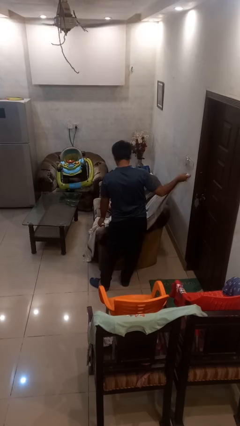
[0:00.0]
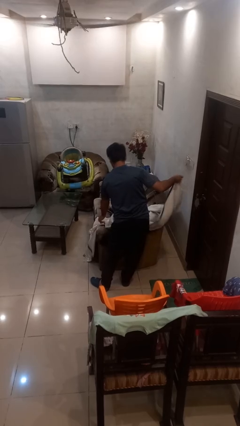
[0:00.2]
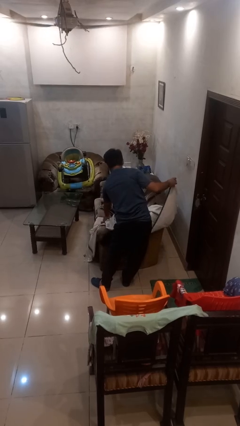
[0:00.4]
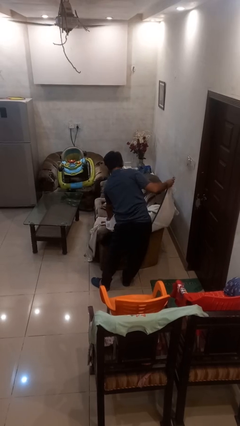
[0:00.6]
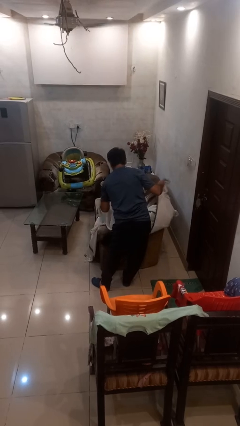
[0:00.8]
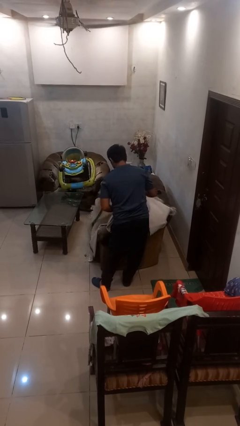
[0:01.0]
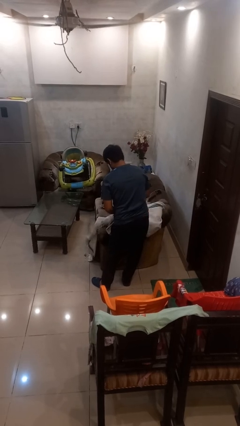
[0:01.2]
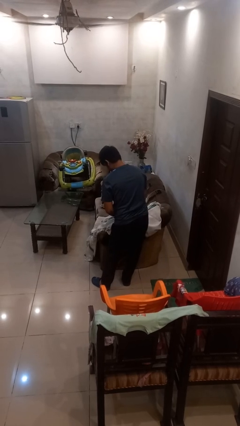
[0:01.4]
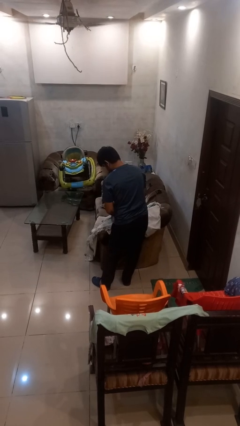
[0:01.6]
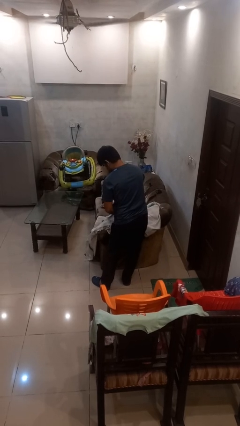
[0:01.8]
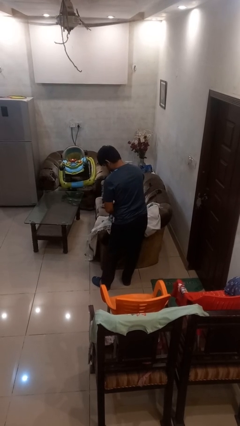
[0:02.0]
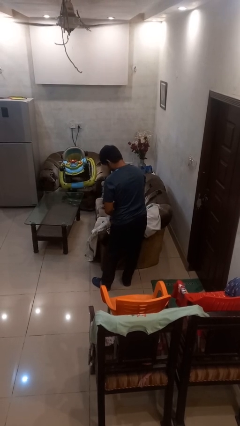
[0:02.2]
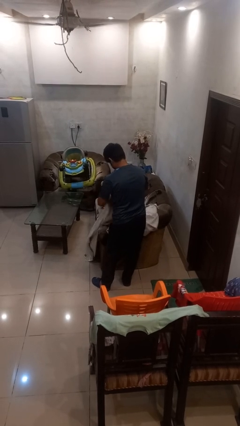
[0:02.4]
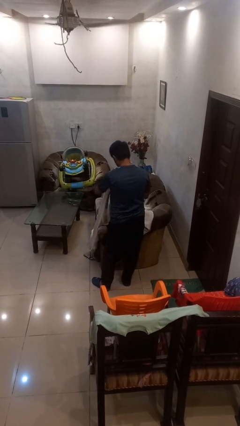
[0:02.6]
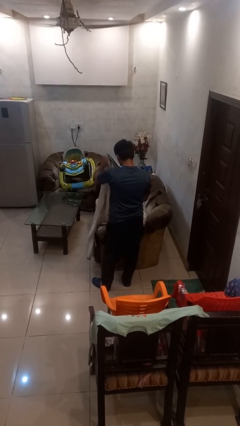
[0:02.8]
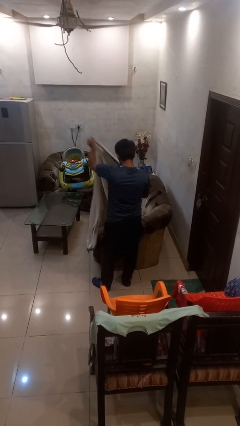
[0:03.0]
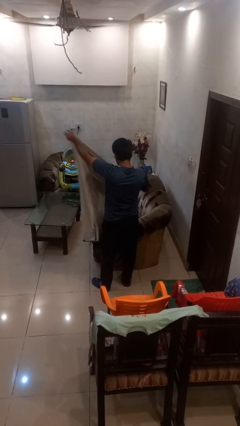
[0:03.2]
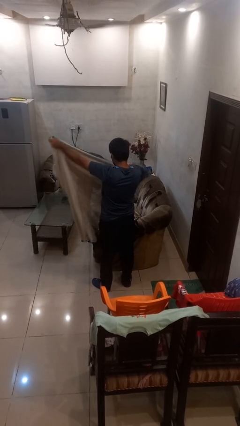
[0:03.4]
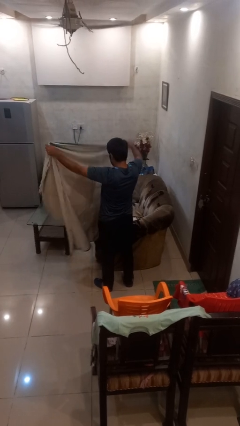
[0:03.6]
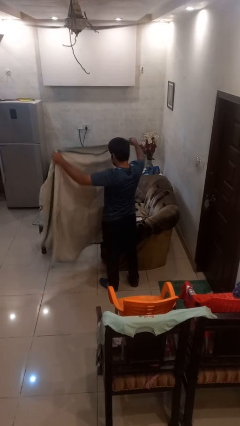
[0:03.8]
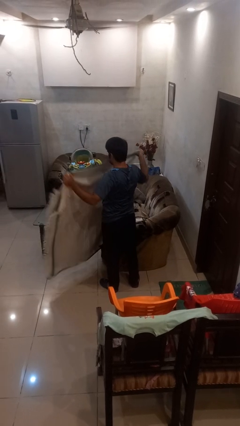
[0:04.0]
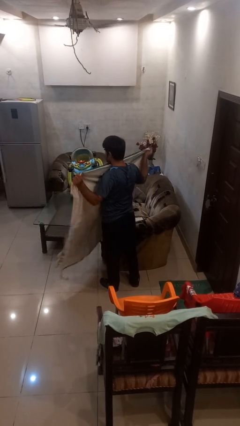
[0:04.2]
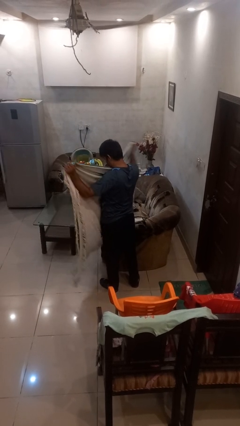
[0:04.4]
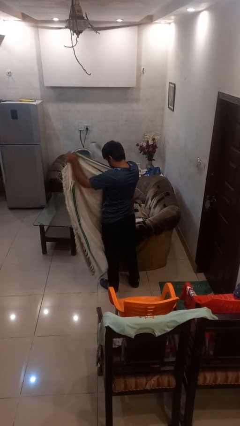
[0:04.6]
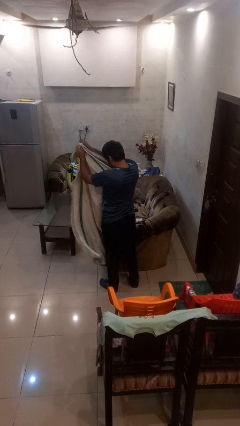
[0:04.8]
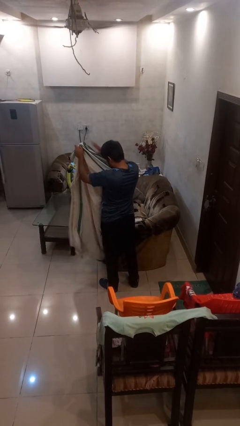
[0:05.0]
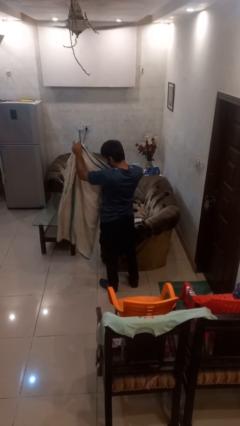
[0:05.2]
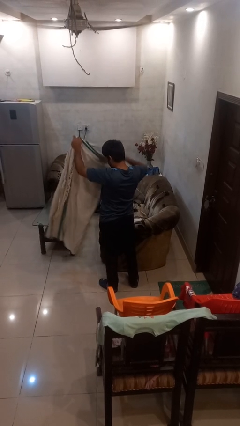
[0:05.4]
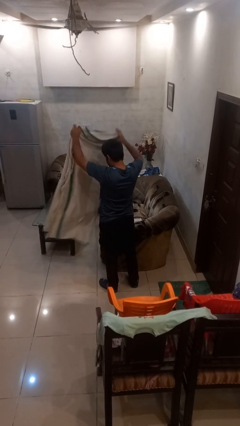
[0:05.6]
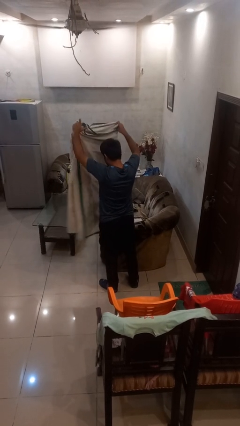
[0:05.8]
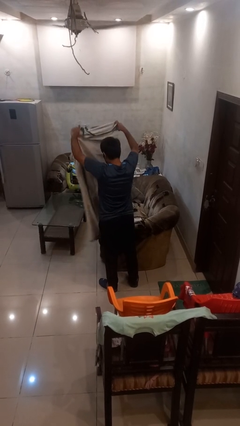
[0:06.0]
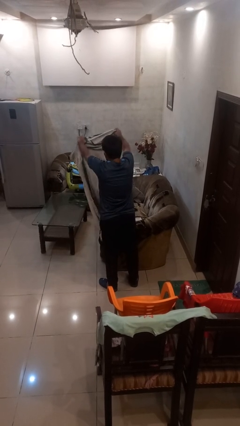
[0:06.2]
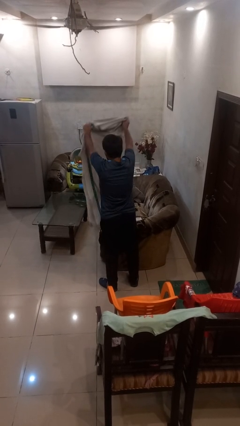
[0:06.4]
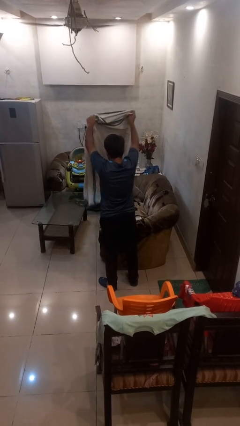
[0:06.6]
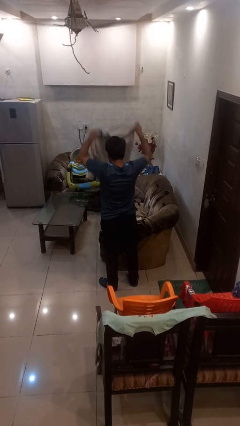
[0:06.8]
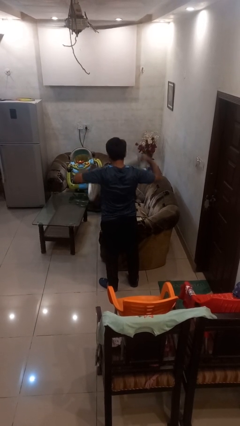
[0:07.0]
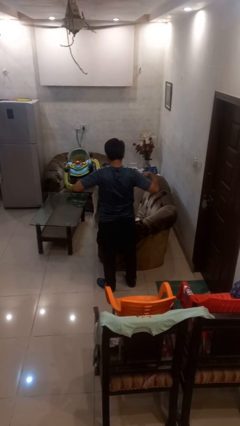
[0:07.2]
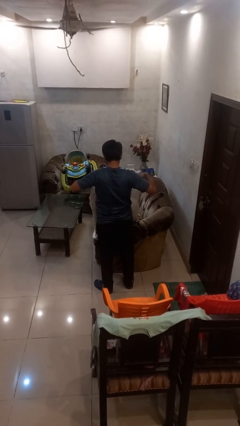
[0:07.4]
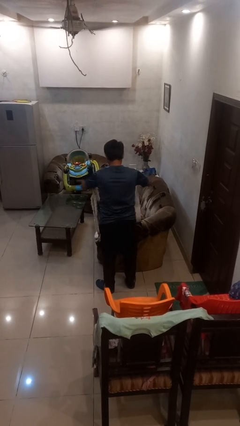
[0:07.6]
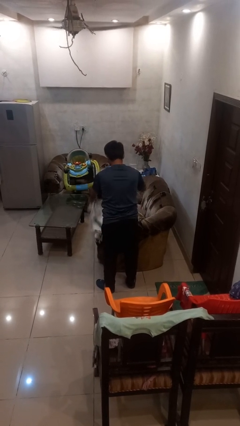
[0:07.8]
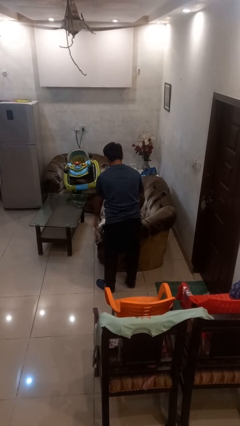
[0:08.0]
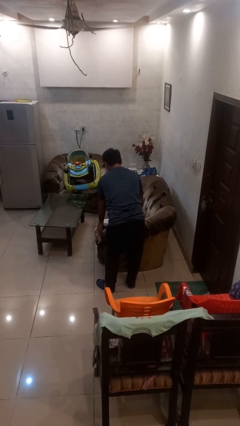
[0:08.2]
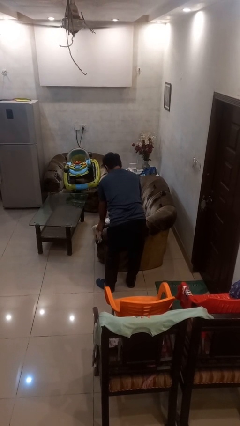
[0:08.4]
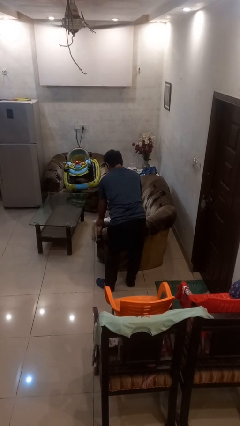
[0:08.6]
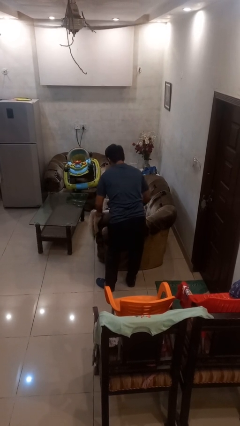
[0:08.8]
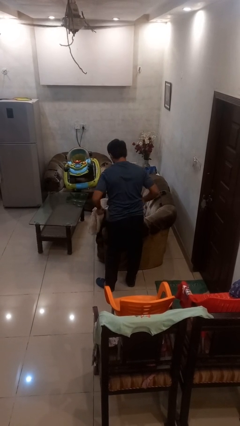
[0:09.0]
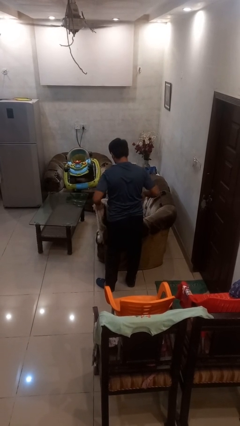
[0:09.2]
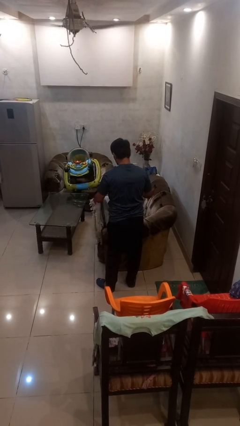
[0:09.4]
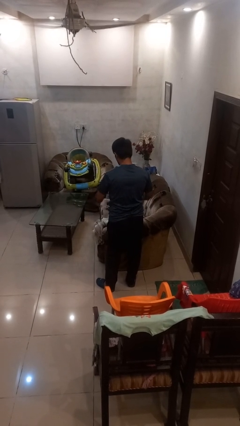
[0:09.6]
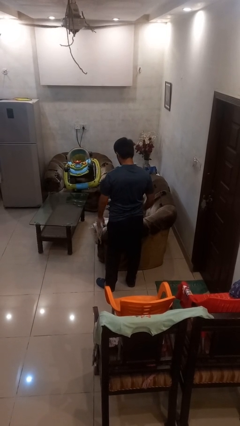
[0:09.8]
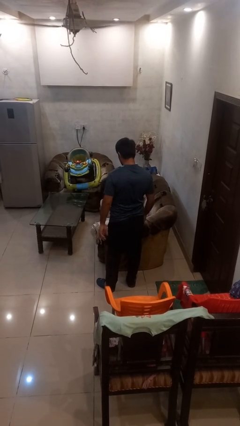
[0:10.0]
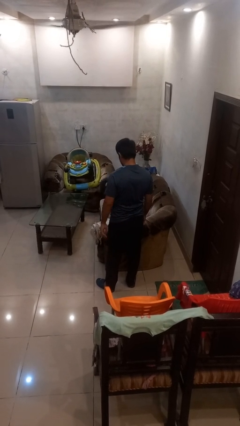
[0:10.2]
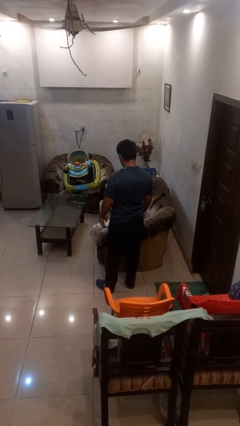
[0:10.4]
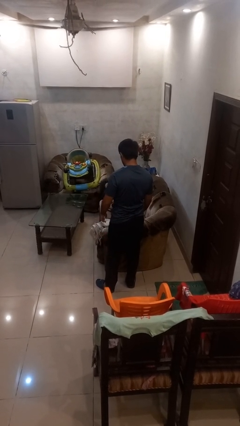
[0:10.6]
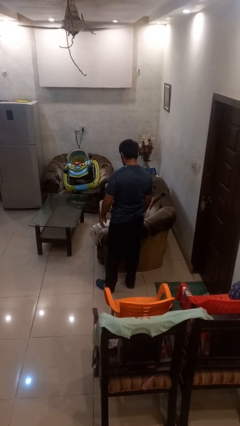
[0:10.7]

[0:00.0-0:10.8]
person folds blanket

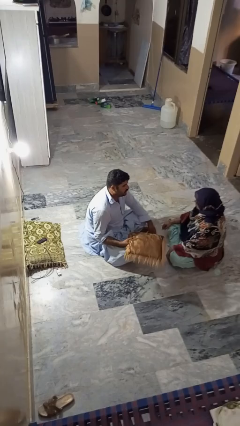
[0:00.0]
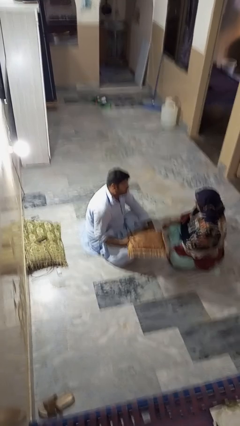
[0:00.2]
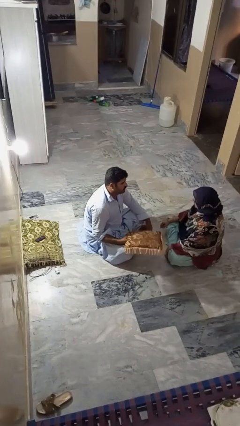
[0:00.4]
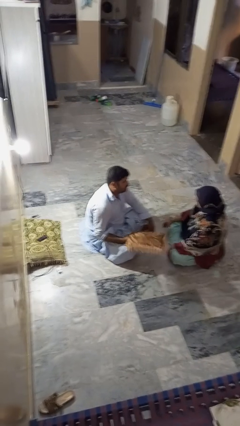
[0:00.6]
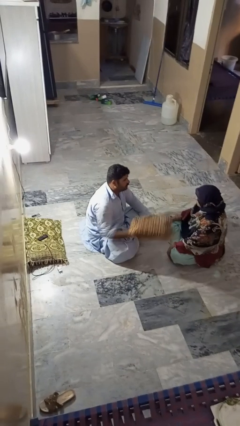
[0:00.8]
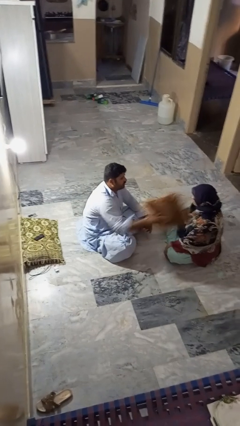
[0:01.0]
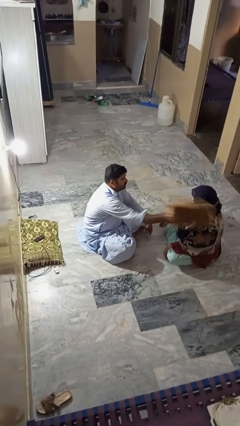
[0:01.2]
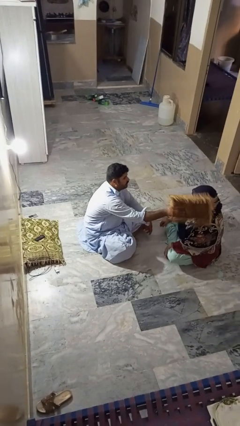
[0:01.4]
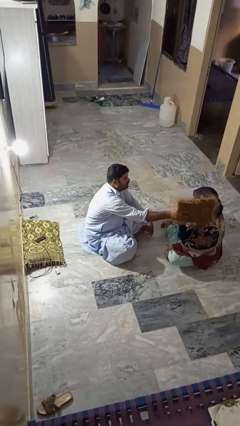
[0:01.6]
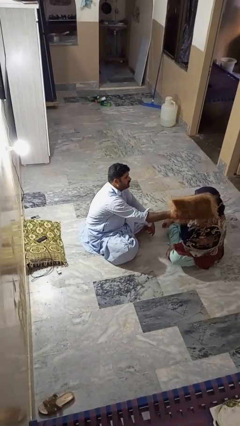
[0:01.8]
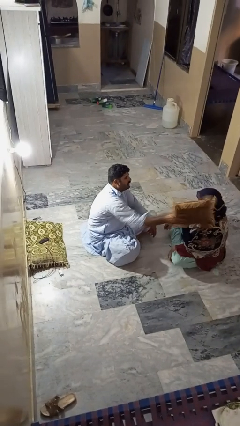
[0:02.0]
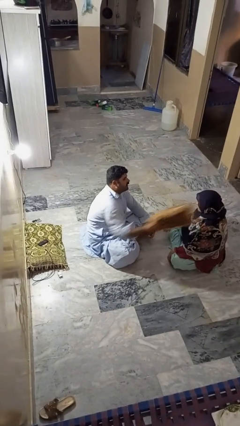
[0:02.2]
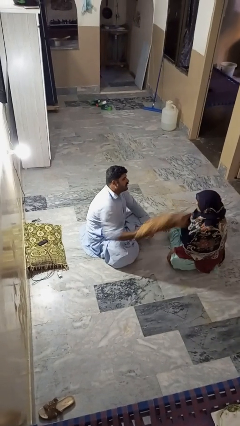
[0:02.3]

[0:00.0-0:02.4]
person hits person with pillow

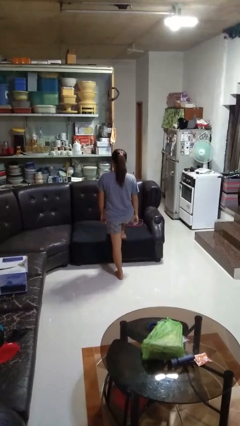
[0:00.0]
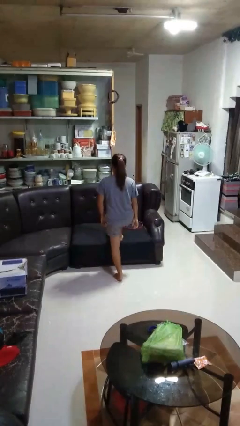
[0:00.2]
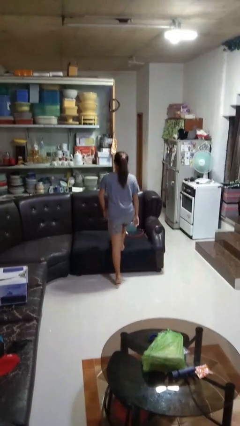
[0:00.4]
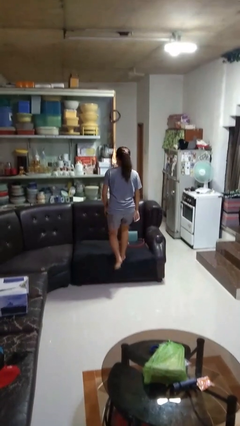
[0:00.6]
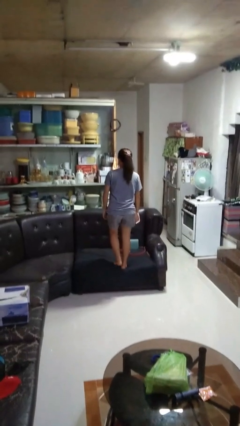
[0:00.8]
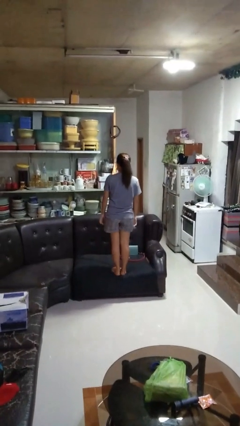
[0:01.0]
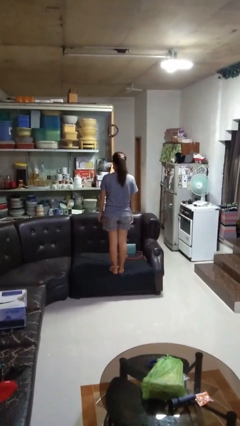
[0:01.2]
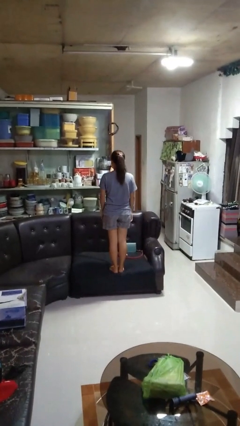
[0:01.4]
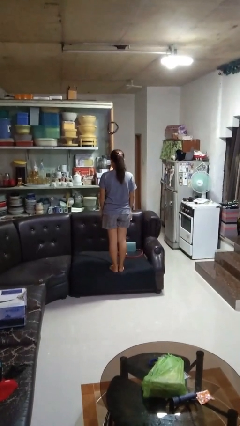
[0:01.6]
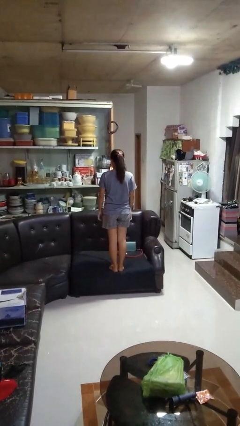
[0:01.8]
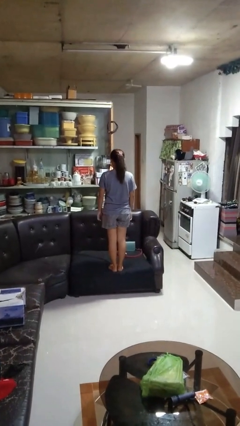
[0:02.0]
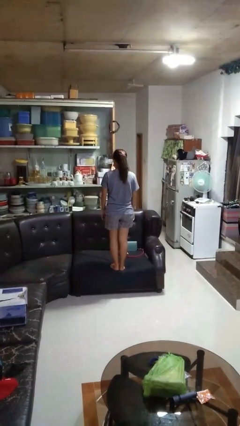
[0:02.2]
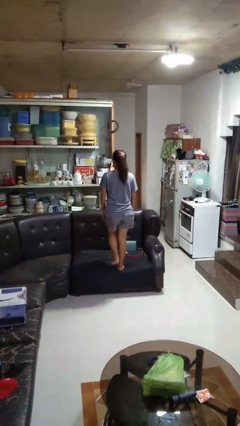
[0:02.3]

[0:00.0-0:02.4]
person climbs on couch

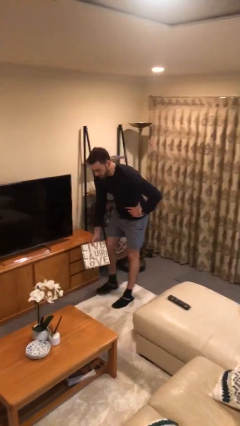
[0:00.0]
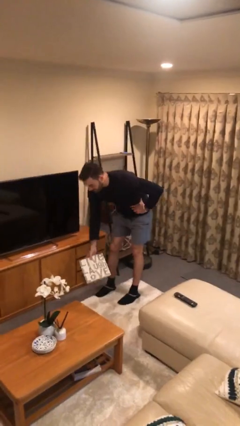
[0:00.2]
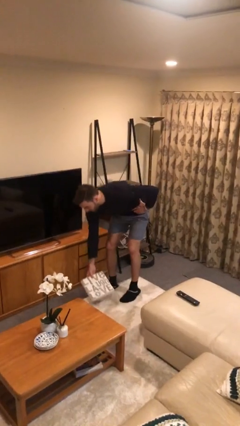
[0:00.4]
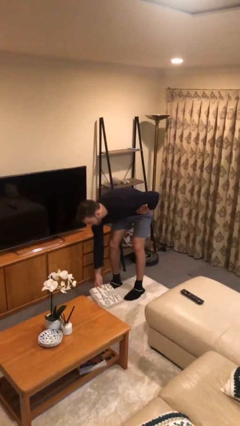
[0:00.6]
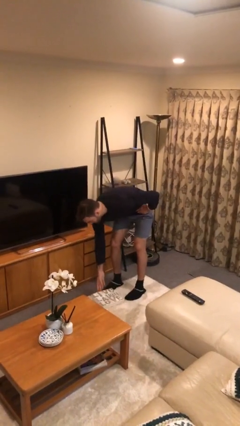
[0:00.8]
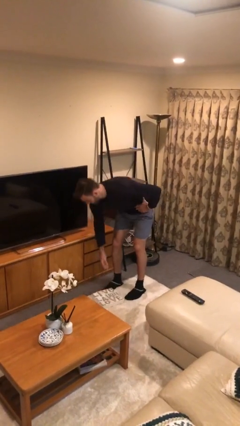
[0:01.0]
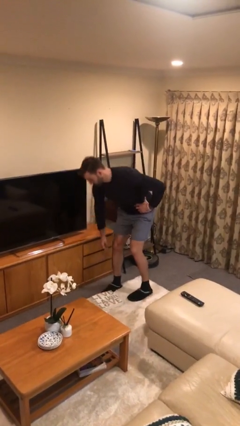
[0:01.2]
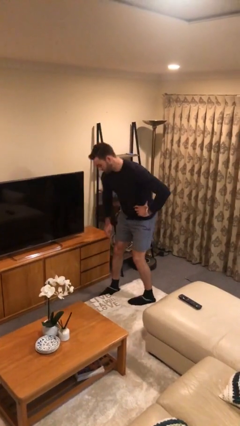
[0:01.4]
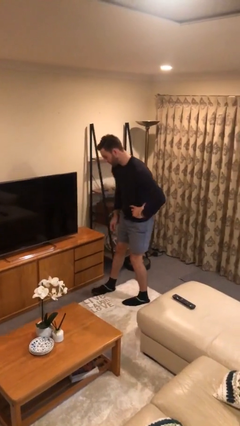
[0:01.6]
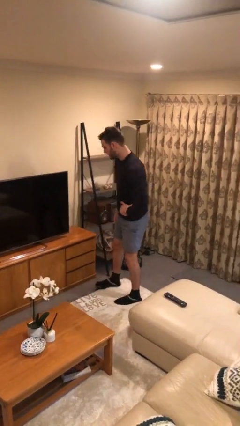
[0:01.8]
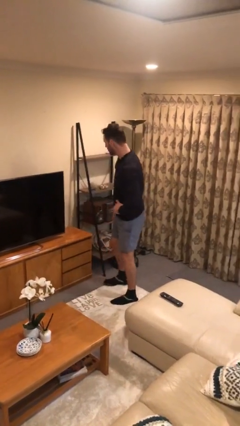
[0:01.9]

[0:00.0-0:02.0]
person puts down object on floor
